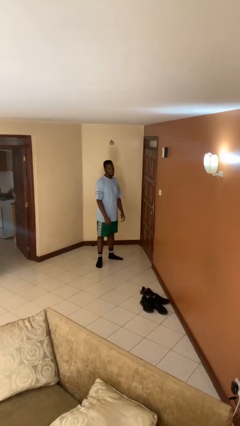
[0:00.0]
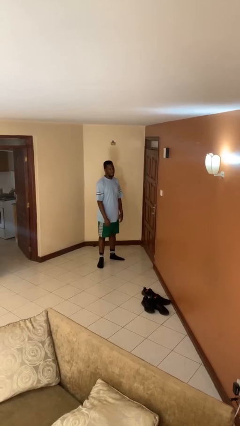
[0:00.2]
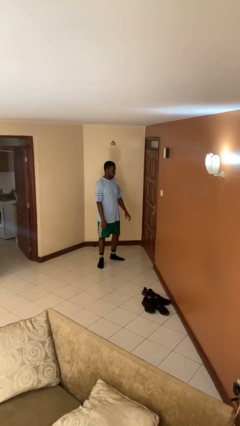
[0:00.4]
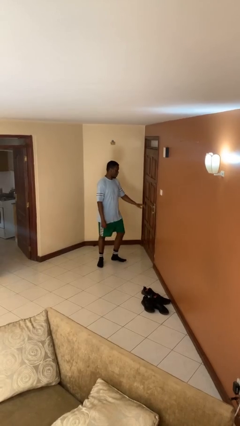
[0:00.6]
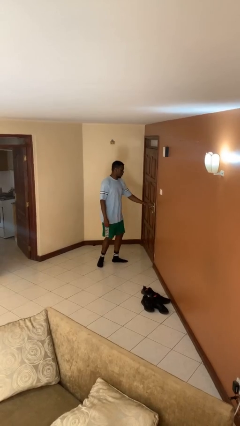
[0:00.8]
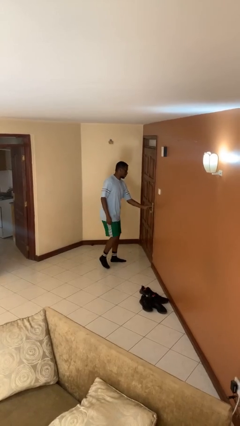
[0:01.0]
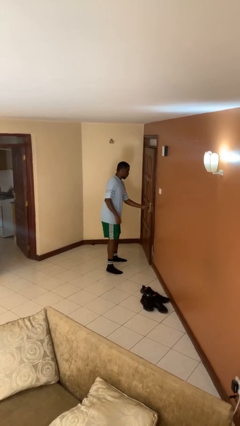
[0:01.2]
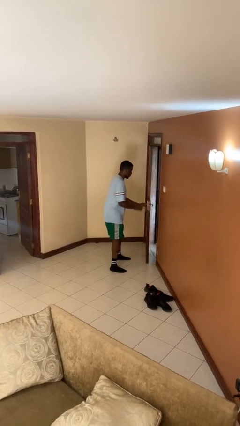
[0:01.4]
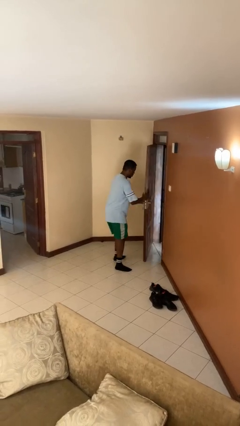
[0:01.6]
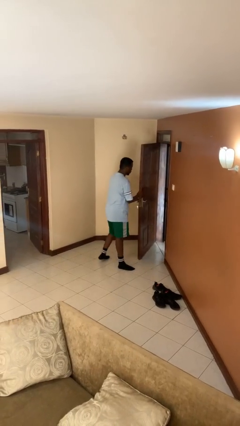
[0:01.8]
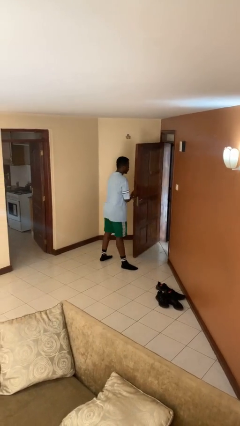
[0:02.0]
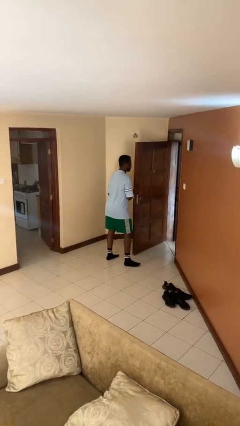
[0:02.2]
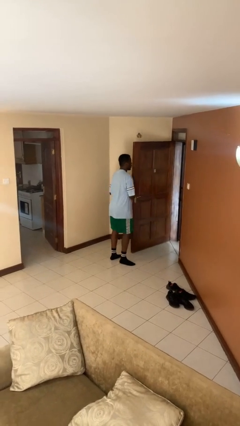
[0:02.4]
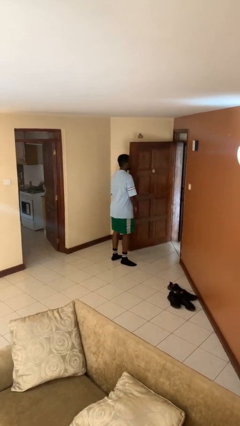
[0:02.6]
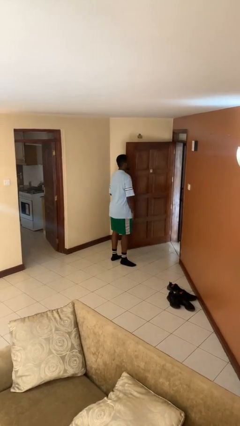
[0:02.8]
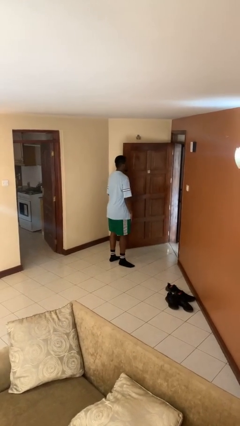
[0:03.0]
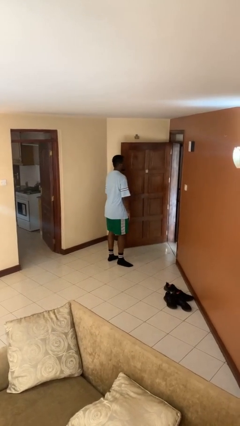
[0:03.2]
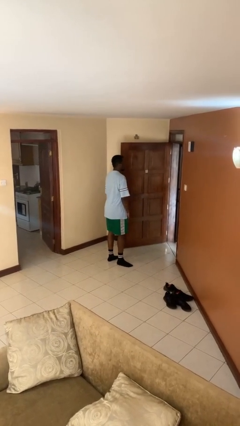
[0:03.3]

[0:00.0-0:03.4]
person opens facility door

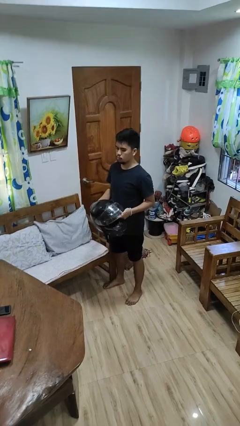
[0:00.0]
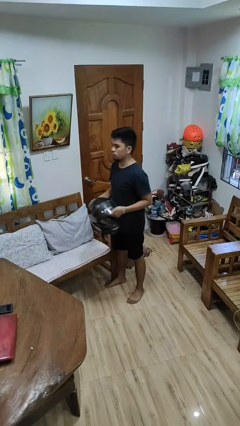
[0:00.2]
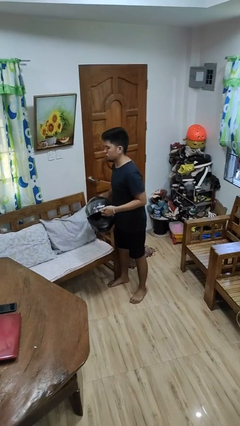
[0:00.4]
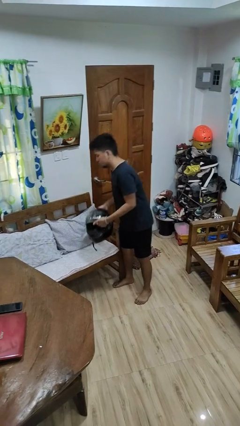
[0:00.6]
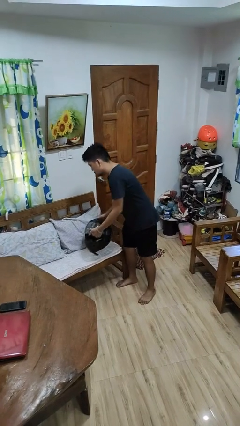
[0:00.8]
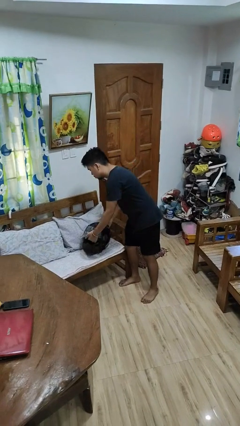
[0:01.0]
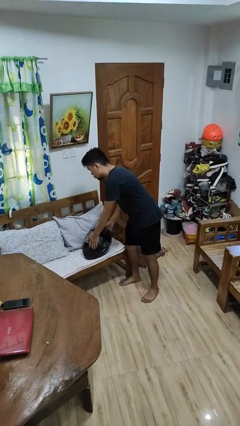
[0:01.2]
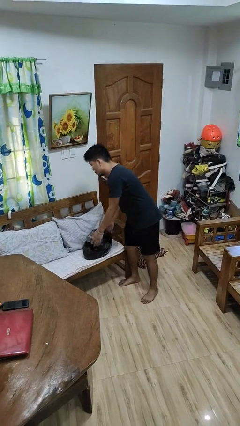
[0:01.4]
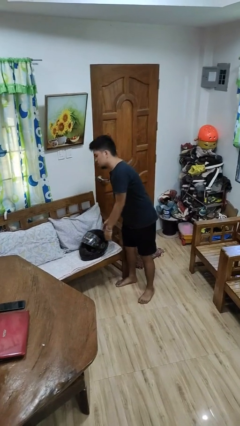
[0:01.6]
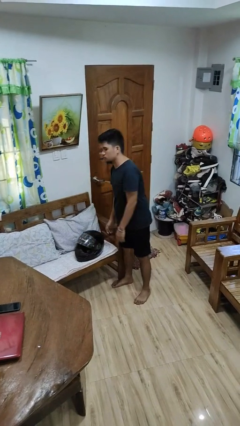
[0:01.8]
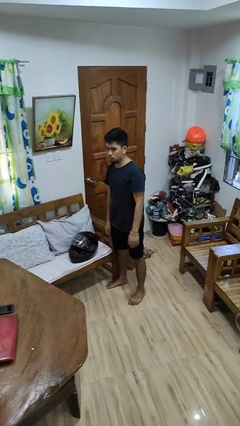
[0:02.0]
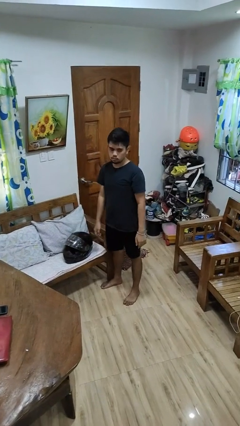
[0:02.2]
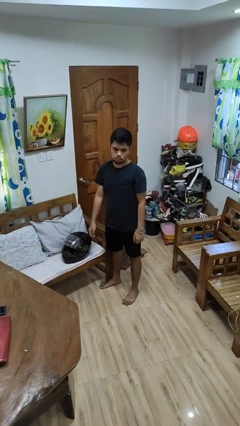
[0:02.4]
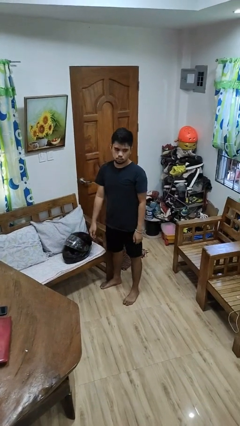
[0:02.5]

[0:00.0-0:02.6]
person puts down object on couch

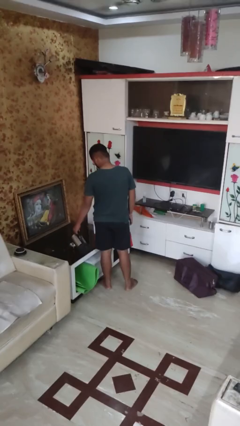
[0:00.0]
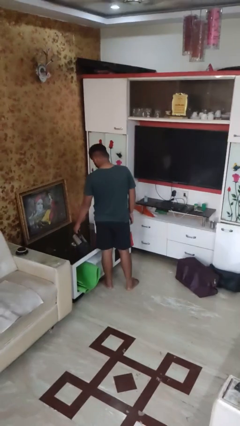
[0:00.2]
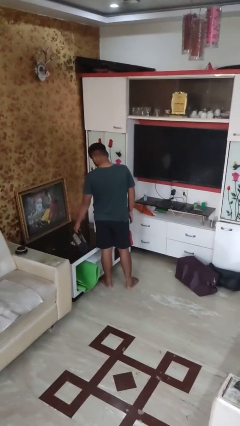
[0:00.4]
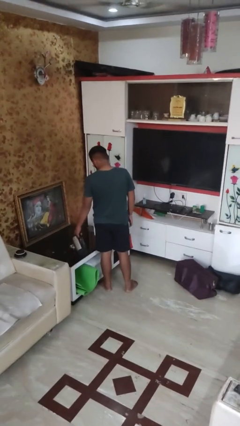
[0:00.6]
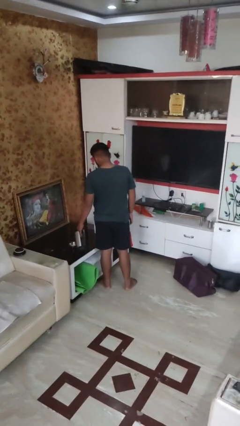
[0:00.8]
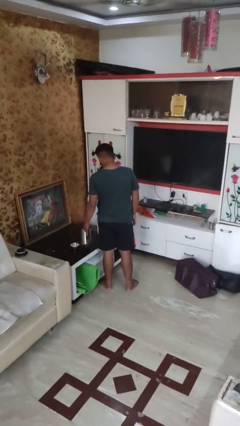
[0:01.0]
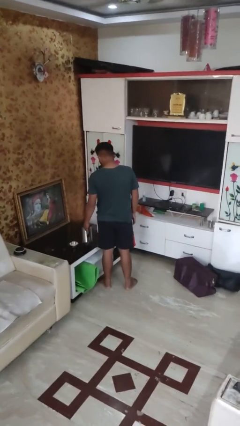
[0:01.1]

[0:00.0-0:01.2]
person pours into bowl

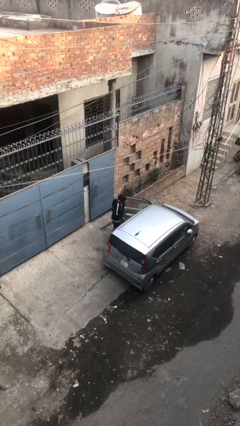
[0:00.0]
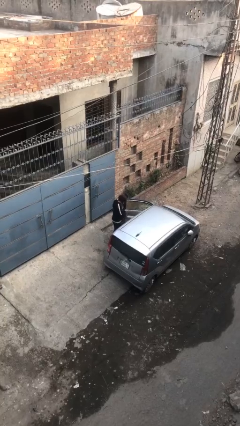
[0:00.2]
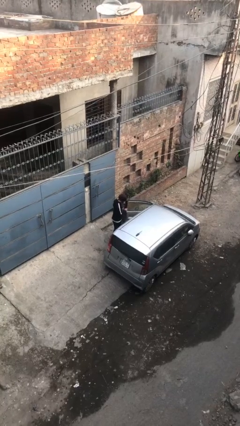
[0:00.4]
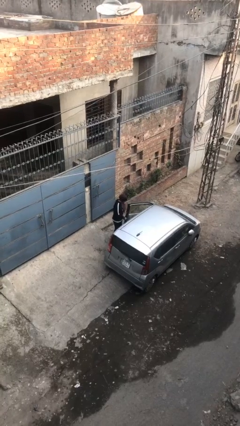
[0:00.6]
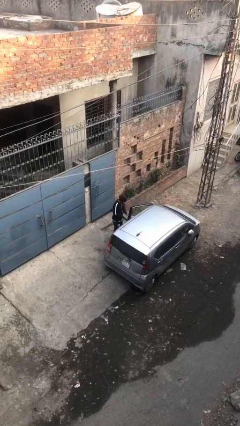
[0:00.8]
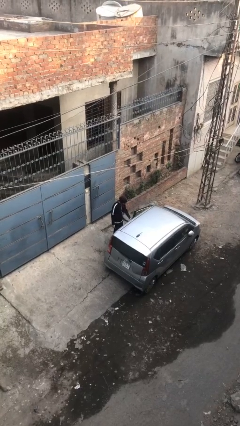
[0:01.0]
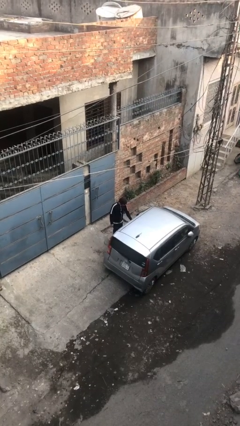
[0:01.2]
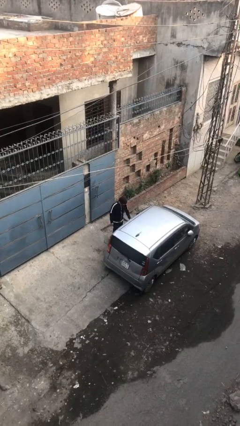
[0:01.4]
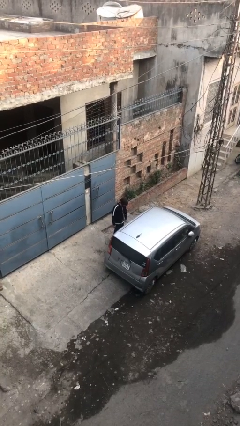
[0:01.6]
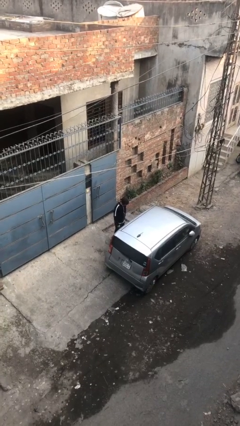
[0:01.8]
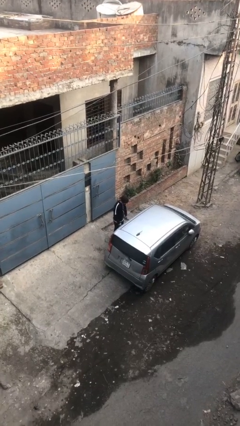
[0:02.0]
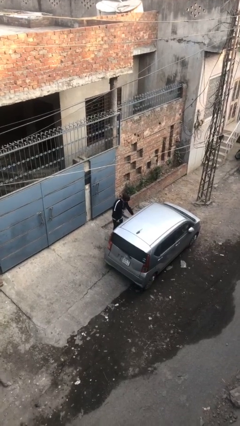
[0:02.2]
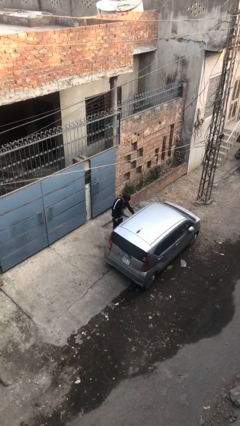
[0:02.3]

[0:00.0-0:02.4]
person closes car door

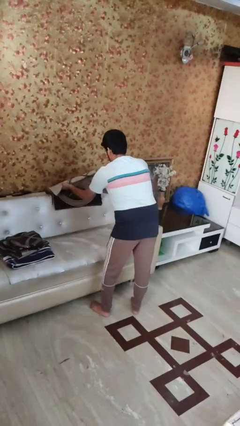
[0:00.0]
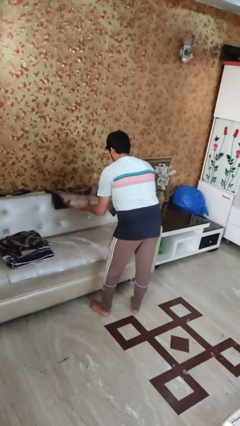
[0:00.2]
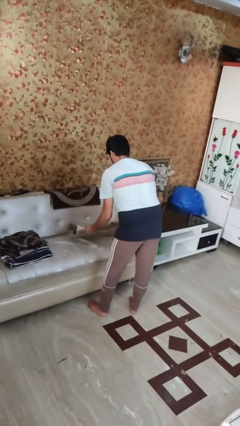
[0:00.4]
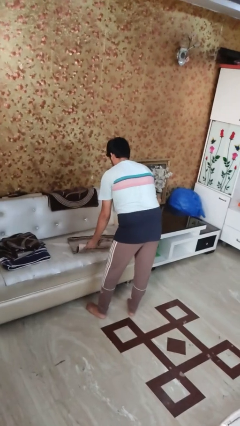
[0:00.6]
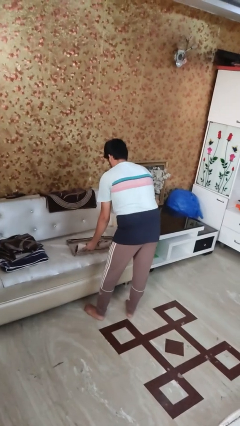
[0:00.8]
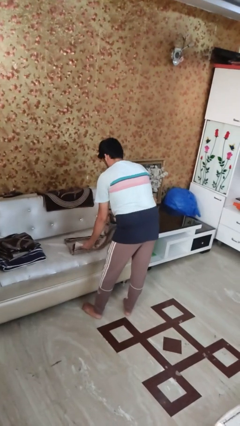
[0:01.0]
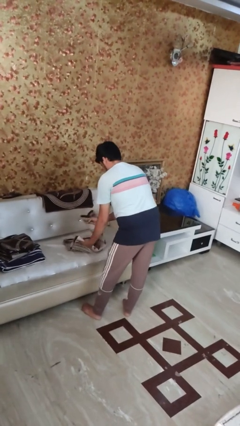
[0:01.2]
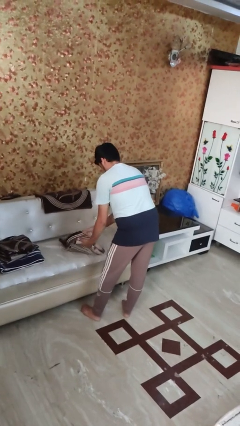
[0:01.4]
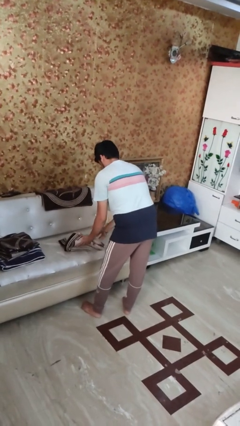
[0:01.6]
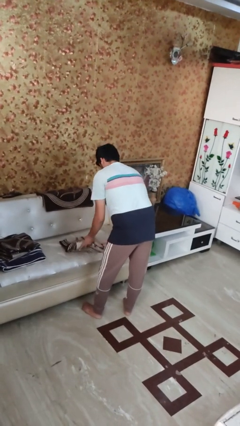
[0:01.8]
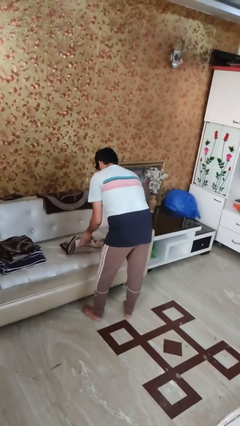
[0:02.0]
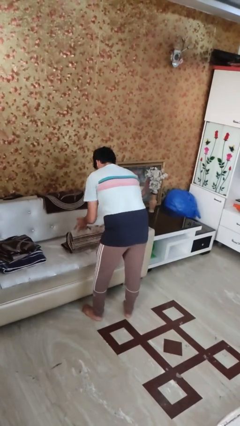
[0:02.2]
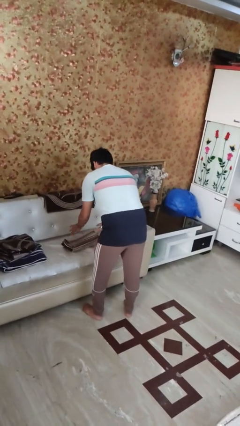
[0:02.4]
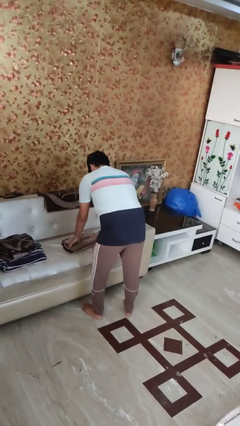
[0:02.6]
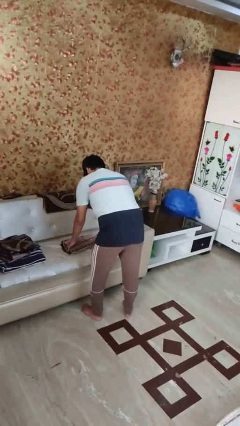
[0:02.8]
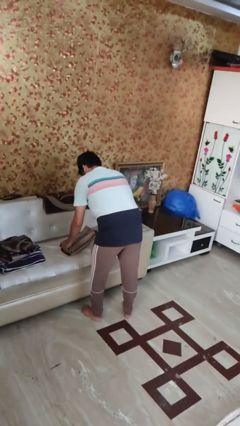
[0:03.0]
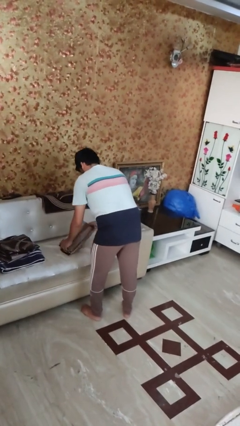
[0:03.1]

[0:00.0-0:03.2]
person folds towel

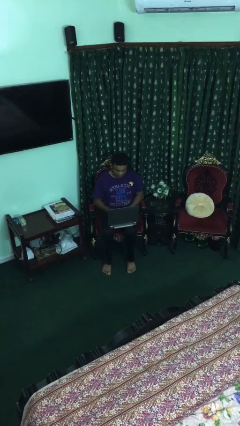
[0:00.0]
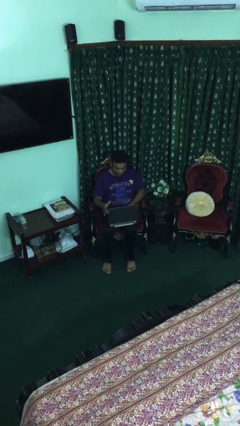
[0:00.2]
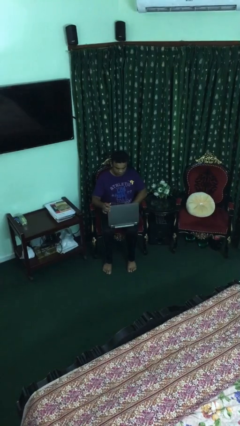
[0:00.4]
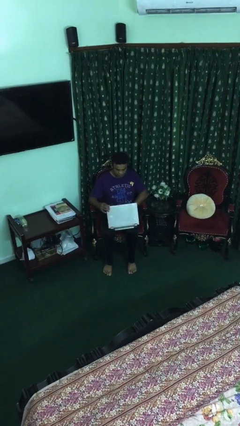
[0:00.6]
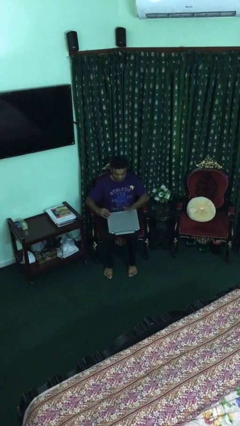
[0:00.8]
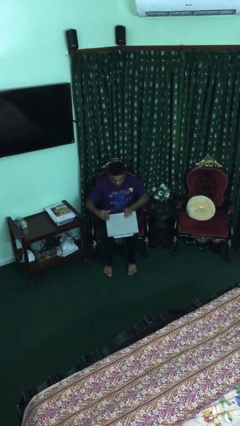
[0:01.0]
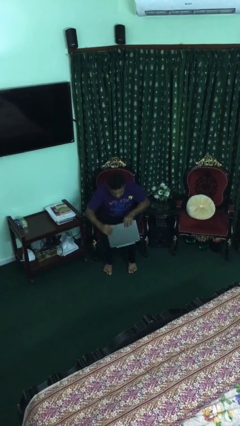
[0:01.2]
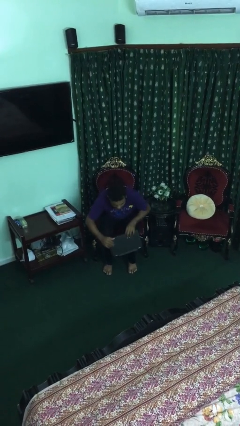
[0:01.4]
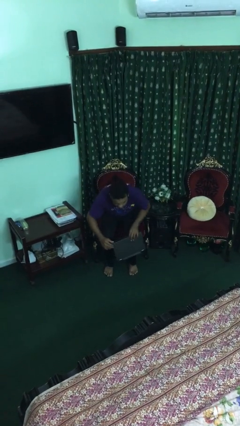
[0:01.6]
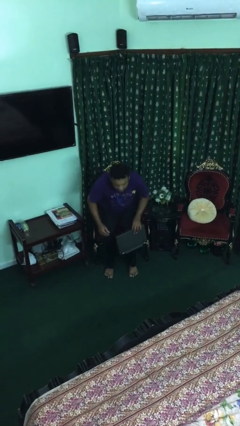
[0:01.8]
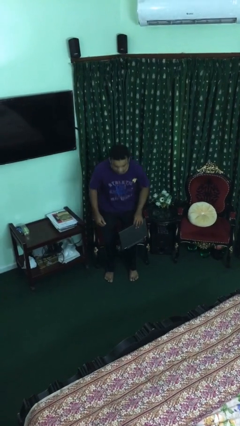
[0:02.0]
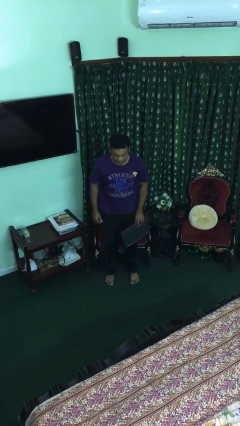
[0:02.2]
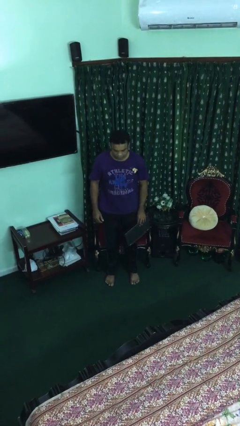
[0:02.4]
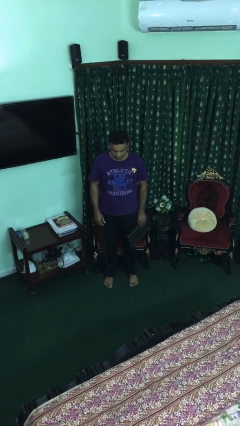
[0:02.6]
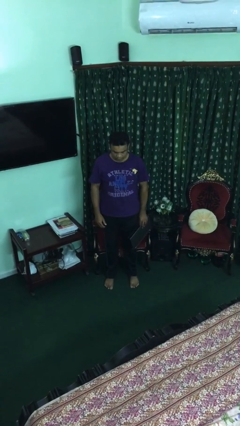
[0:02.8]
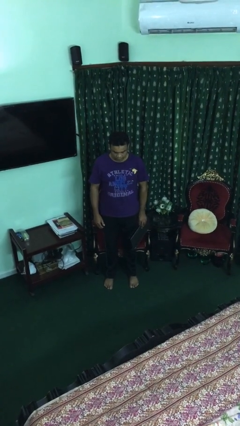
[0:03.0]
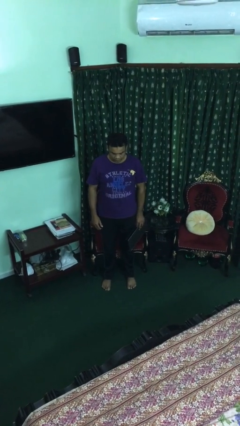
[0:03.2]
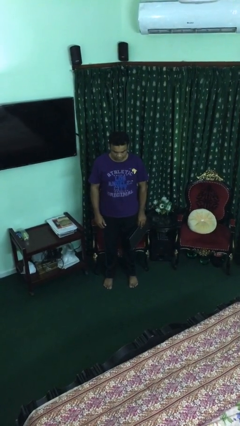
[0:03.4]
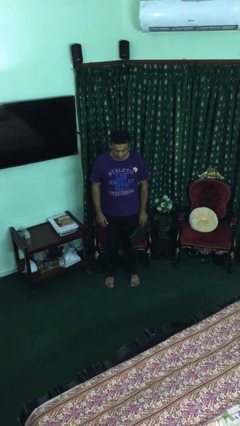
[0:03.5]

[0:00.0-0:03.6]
person stands up

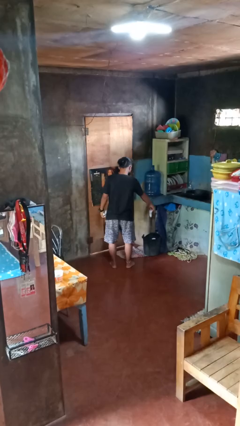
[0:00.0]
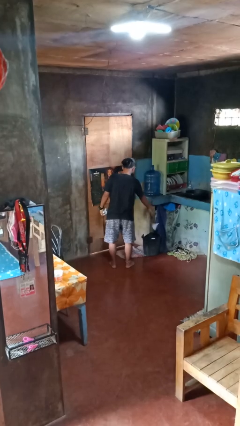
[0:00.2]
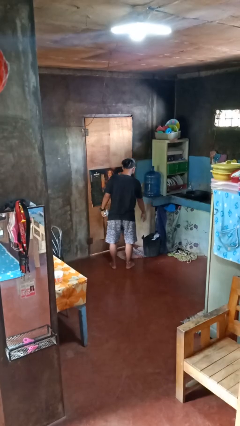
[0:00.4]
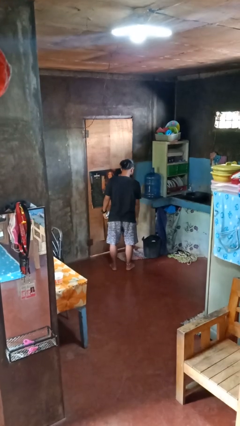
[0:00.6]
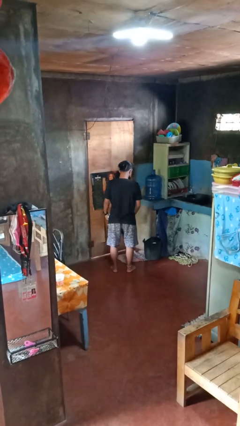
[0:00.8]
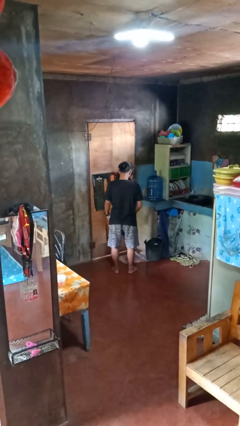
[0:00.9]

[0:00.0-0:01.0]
person discards trash

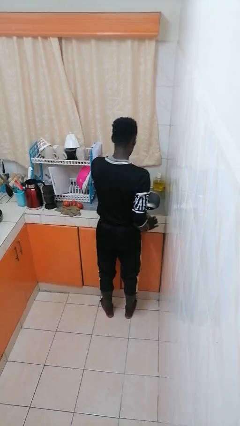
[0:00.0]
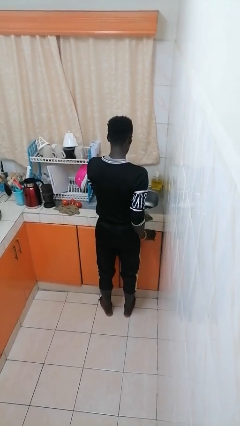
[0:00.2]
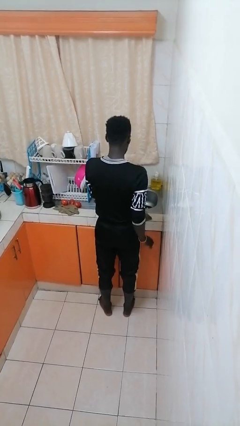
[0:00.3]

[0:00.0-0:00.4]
person washes dish
